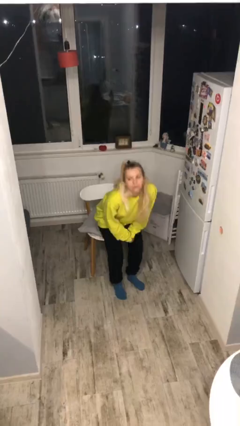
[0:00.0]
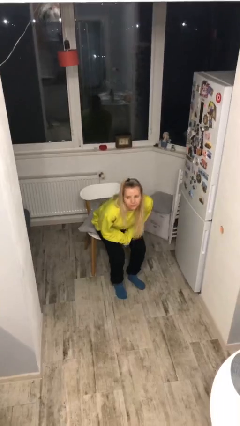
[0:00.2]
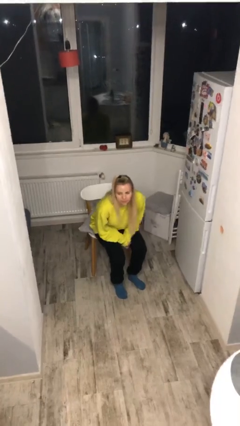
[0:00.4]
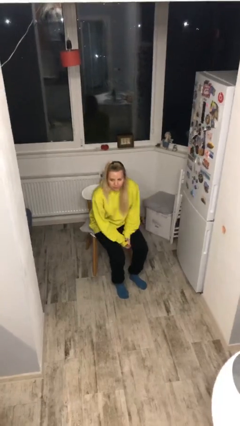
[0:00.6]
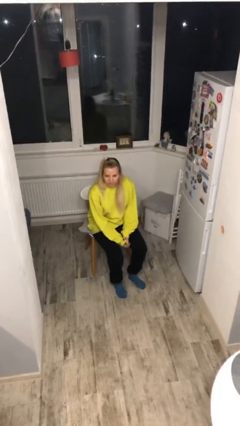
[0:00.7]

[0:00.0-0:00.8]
person sits down

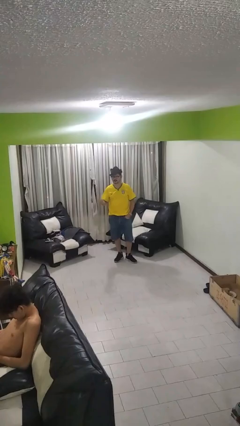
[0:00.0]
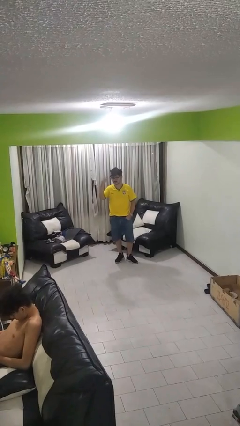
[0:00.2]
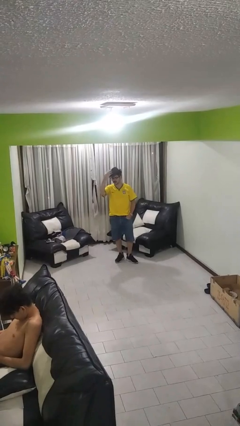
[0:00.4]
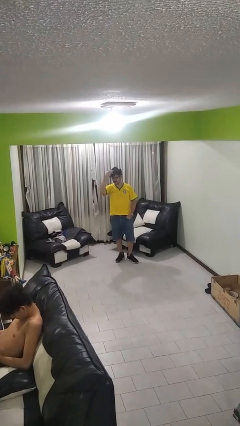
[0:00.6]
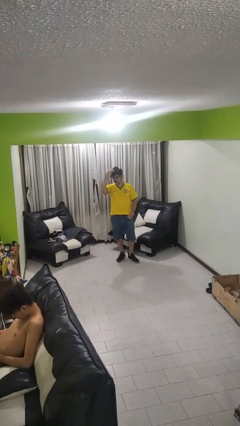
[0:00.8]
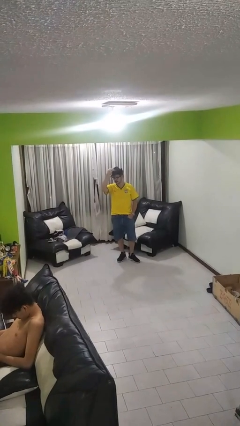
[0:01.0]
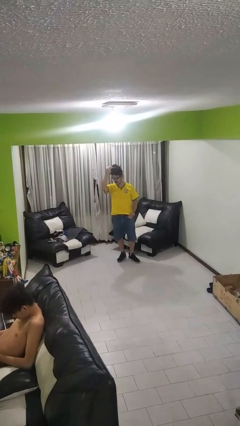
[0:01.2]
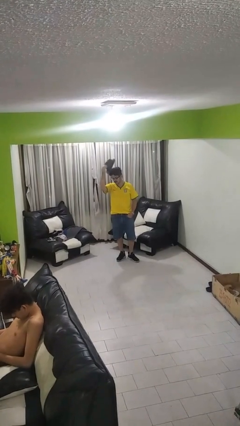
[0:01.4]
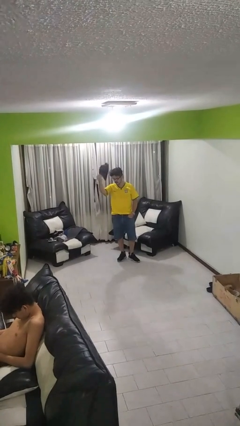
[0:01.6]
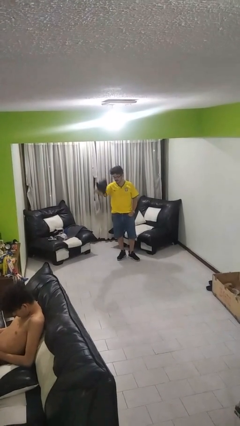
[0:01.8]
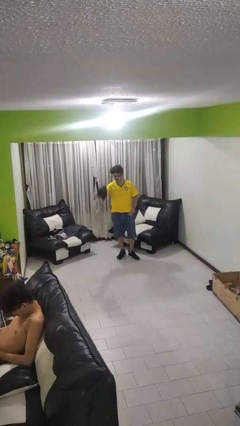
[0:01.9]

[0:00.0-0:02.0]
person takes off hat

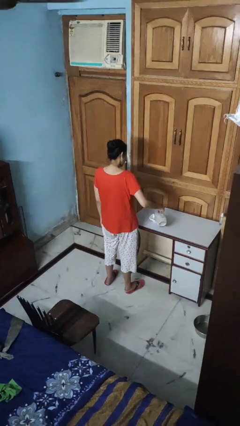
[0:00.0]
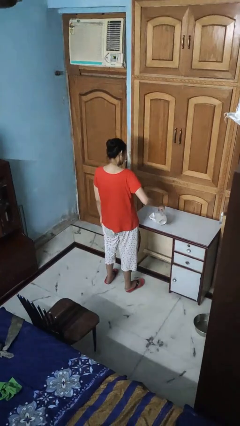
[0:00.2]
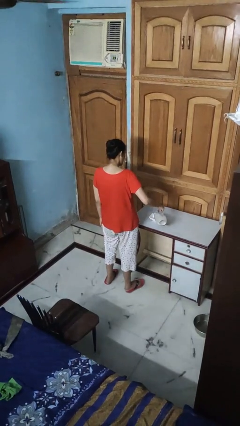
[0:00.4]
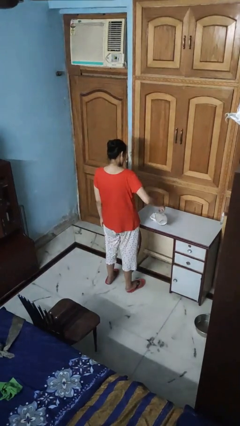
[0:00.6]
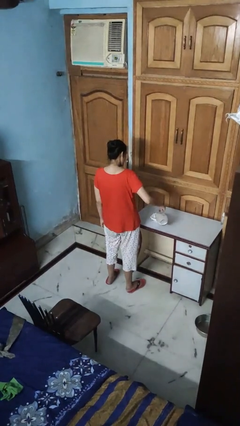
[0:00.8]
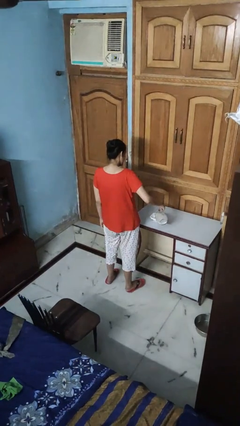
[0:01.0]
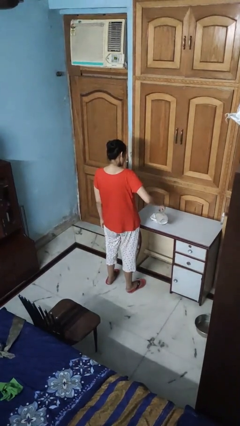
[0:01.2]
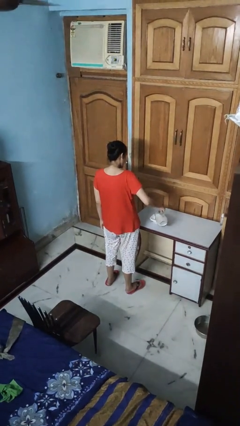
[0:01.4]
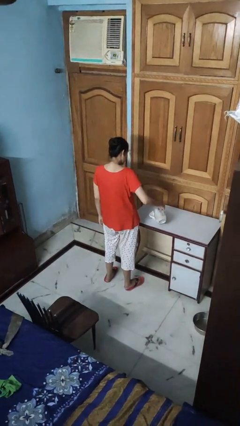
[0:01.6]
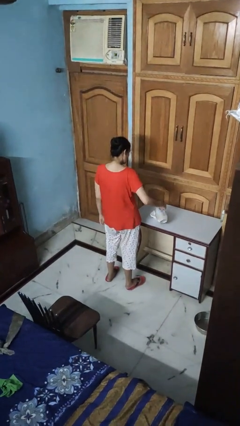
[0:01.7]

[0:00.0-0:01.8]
person pours into bowl

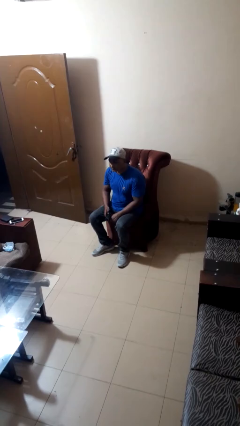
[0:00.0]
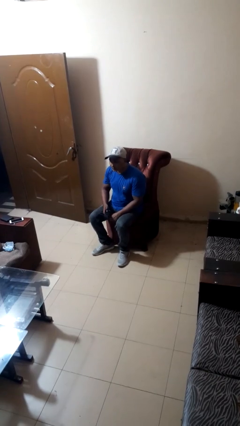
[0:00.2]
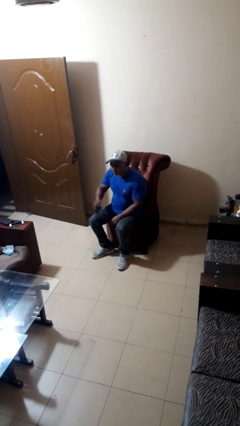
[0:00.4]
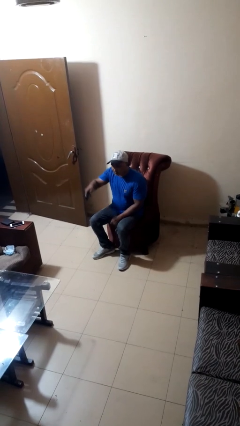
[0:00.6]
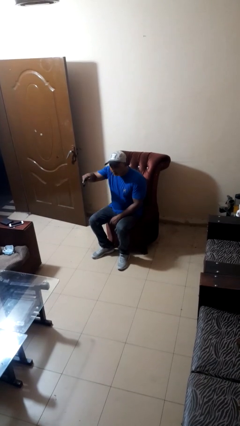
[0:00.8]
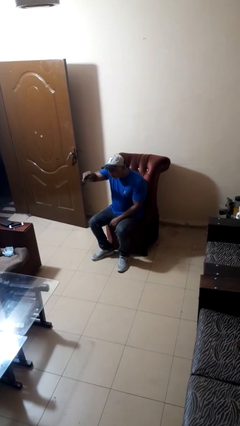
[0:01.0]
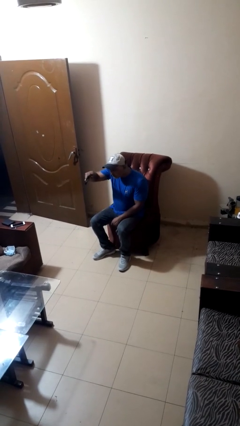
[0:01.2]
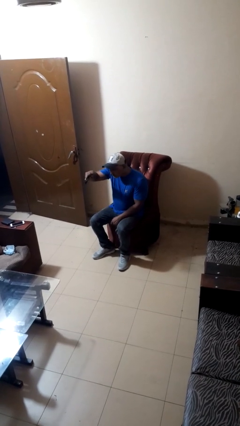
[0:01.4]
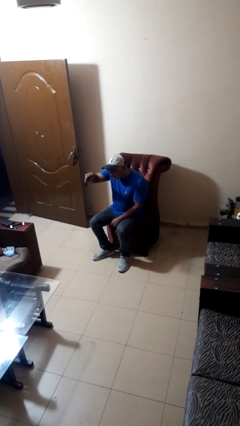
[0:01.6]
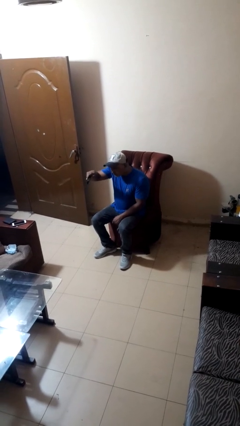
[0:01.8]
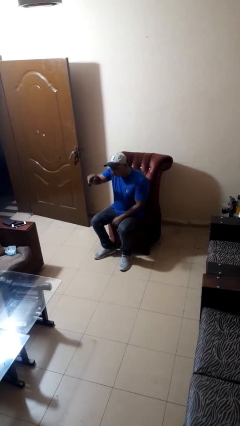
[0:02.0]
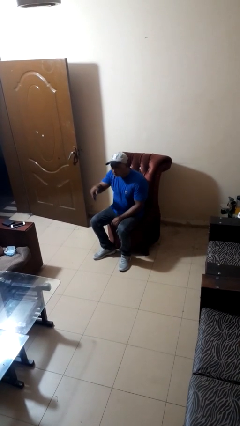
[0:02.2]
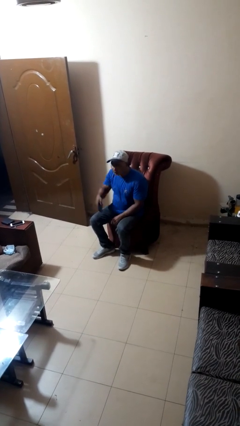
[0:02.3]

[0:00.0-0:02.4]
person uses television remote

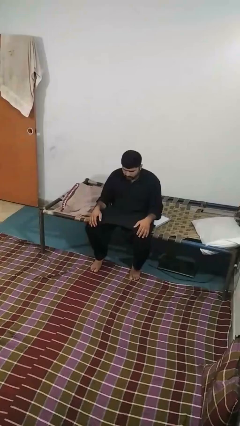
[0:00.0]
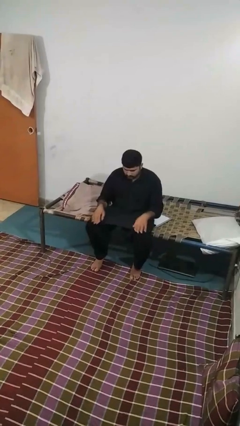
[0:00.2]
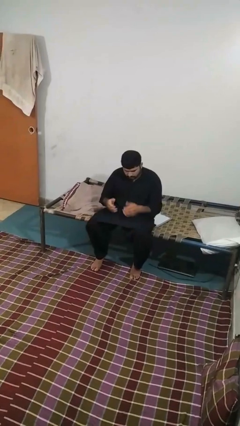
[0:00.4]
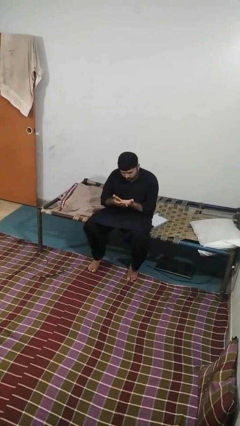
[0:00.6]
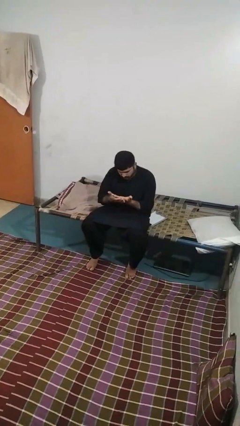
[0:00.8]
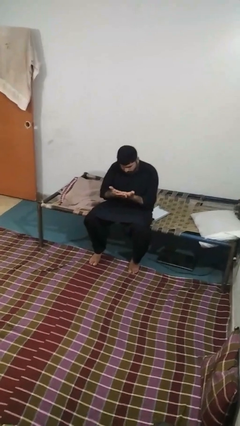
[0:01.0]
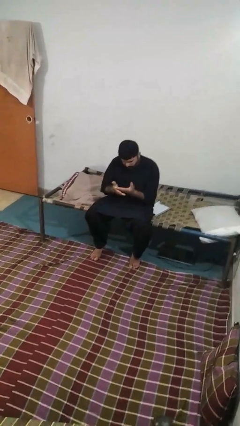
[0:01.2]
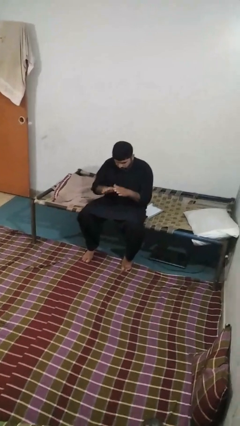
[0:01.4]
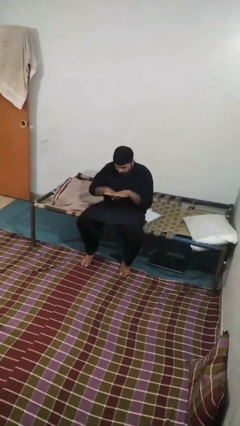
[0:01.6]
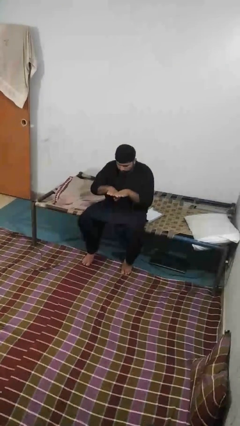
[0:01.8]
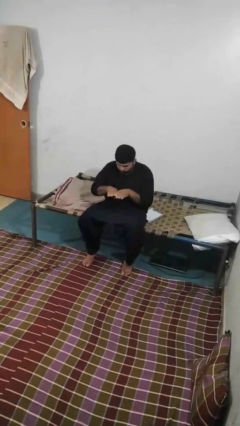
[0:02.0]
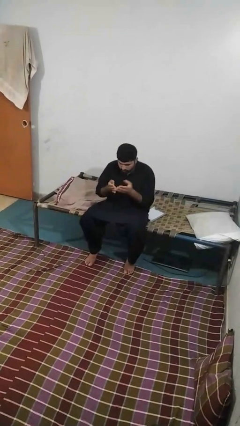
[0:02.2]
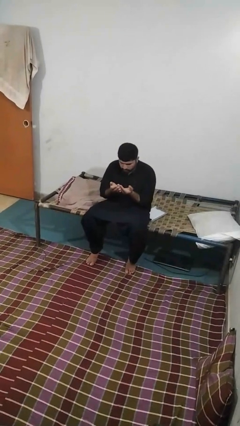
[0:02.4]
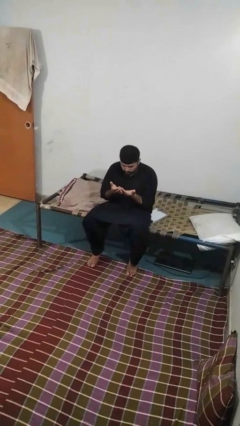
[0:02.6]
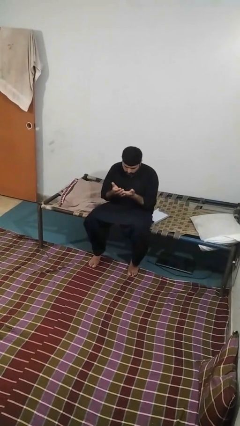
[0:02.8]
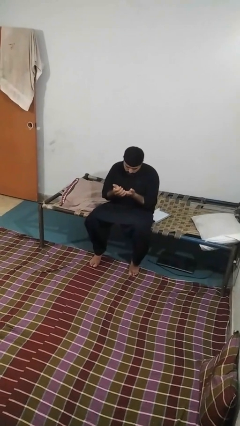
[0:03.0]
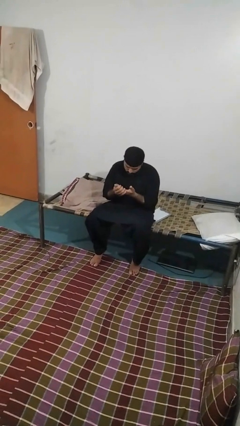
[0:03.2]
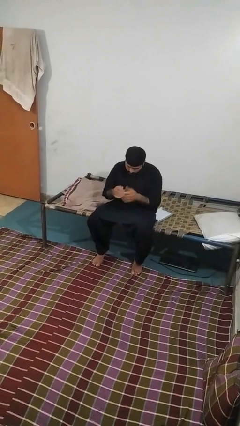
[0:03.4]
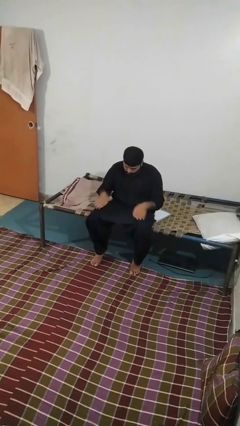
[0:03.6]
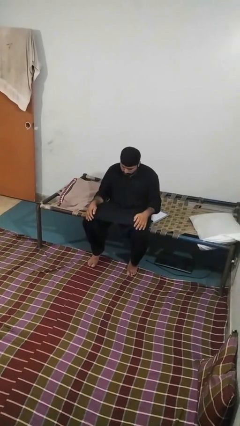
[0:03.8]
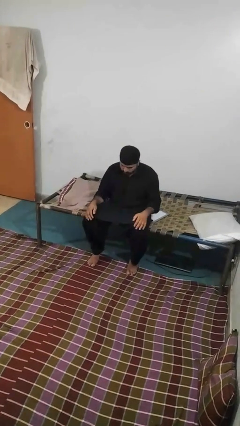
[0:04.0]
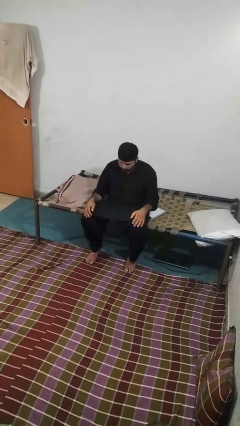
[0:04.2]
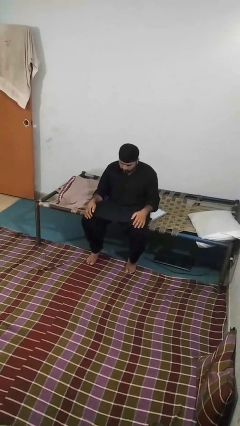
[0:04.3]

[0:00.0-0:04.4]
person looks at hands in lap

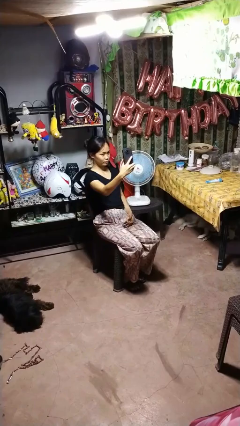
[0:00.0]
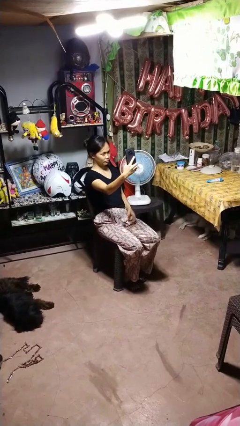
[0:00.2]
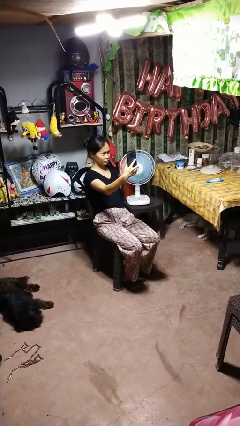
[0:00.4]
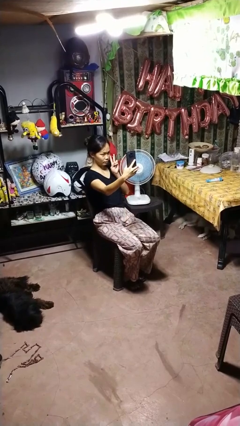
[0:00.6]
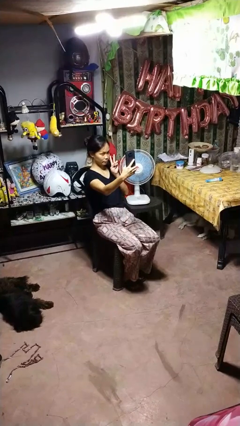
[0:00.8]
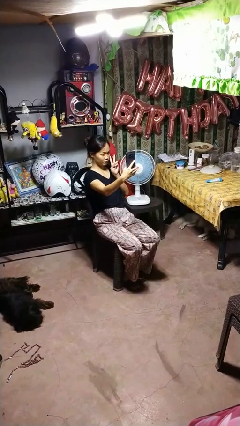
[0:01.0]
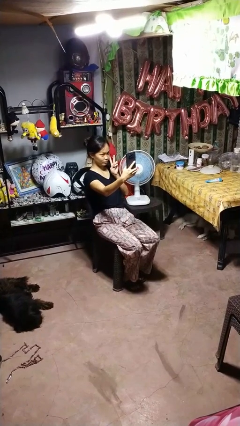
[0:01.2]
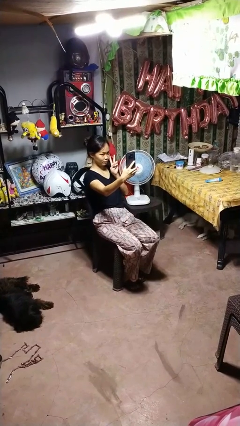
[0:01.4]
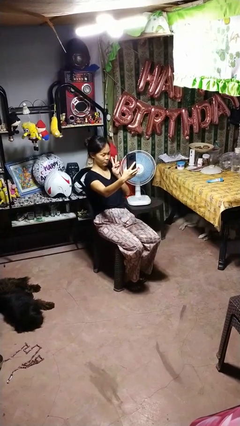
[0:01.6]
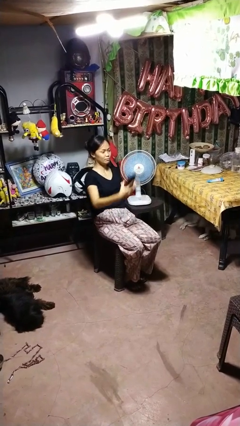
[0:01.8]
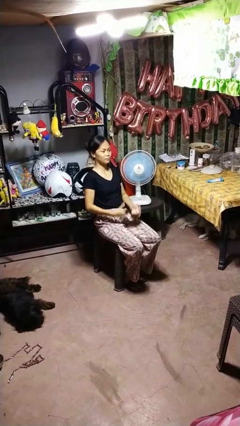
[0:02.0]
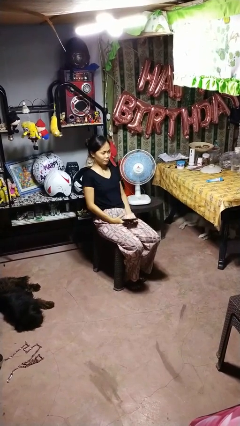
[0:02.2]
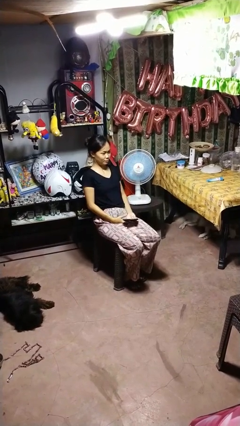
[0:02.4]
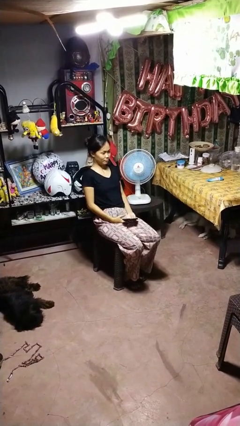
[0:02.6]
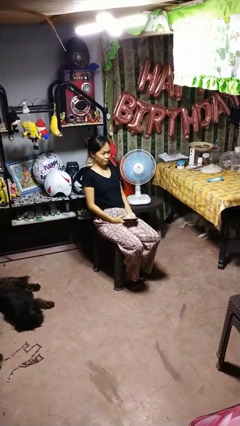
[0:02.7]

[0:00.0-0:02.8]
person takes selfie

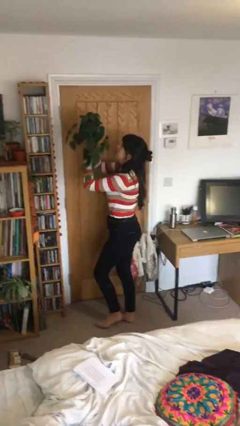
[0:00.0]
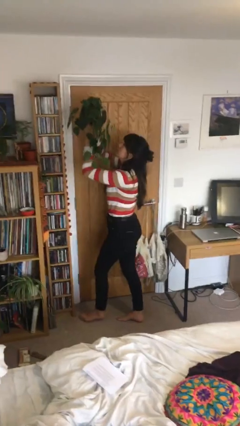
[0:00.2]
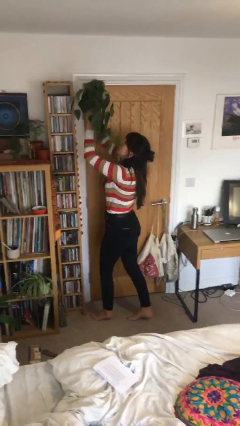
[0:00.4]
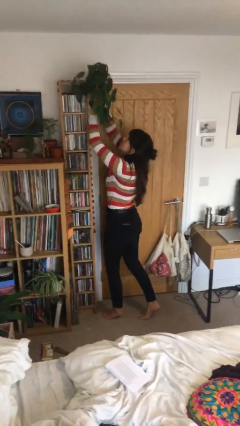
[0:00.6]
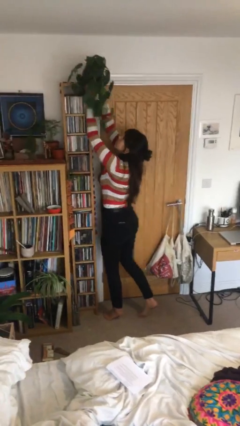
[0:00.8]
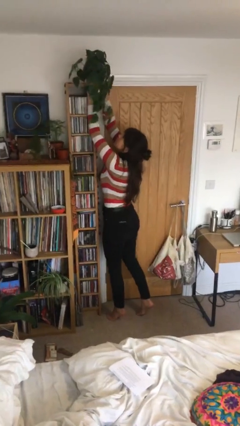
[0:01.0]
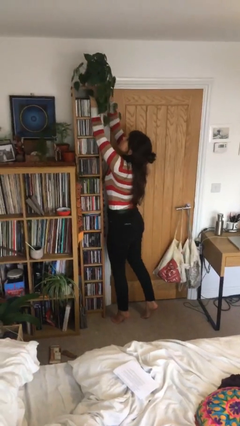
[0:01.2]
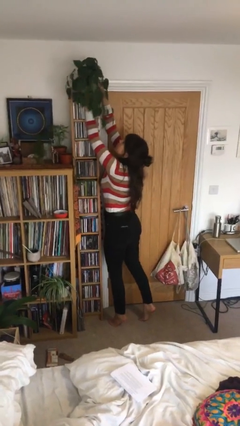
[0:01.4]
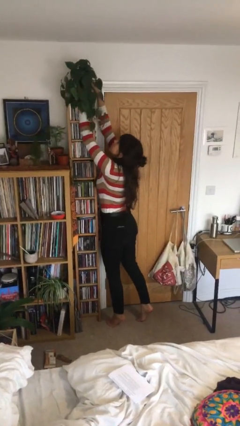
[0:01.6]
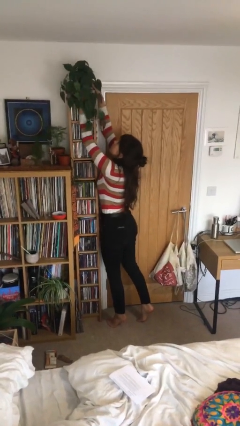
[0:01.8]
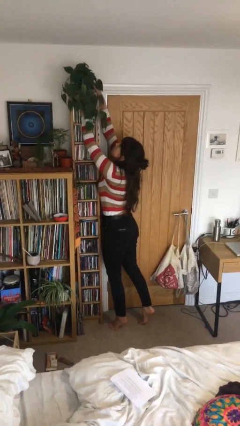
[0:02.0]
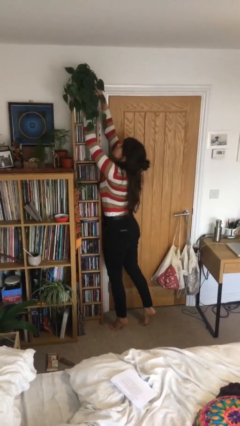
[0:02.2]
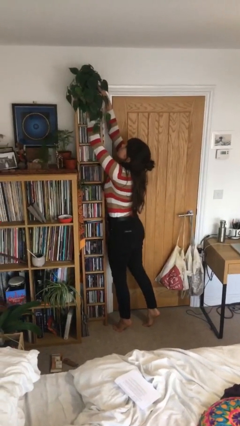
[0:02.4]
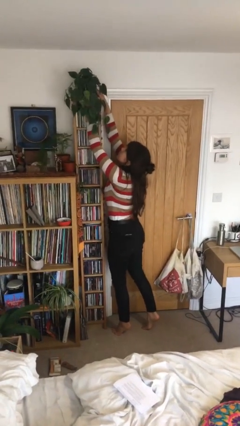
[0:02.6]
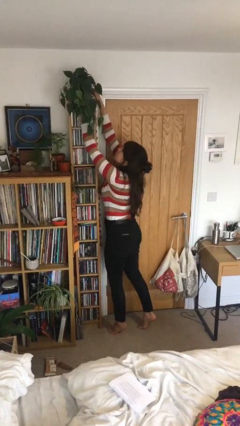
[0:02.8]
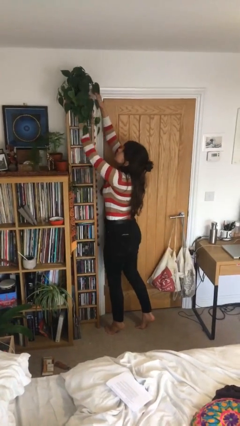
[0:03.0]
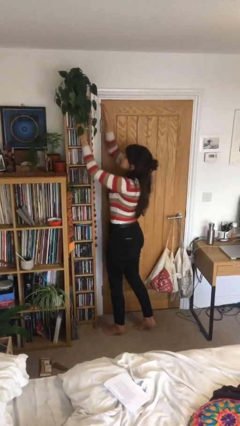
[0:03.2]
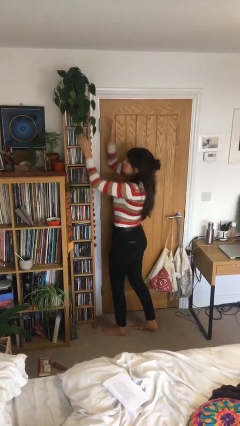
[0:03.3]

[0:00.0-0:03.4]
person puts down object on shelf
